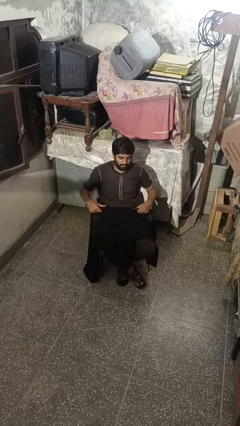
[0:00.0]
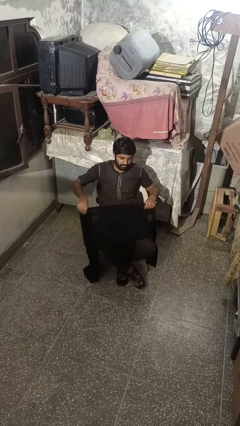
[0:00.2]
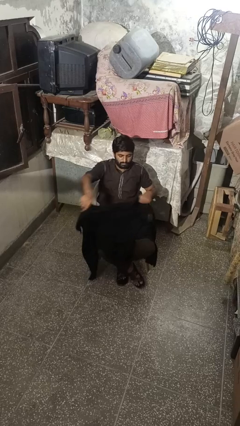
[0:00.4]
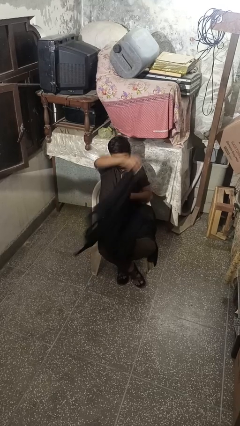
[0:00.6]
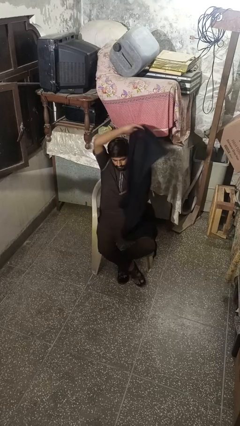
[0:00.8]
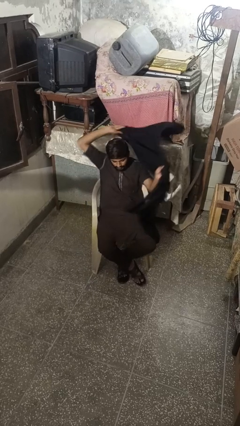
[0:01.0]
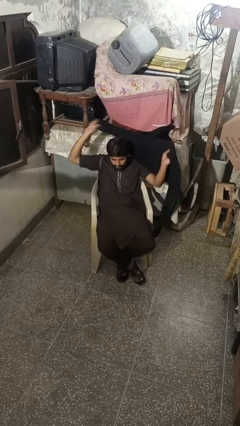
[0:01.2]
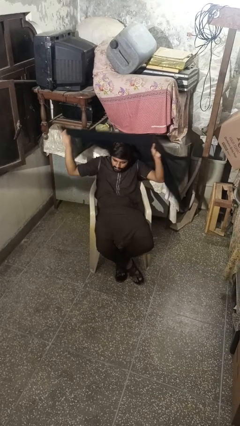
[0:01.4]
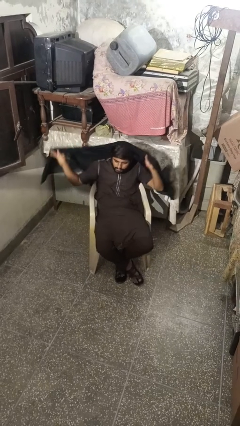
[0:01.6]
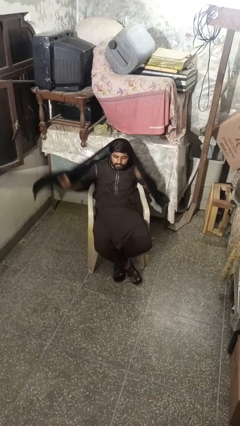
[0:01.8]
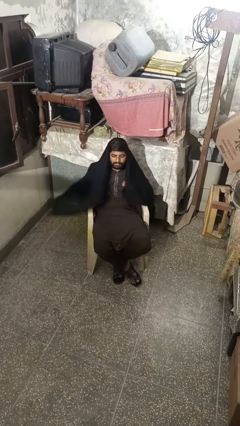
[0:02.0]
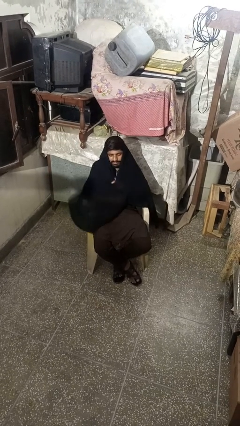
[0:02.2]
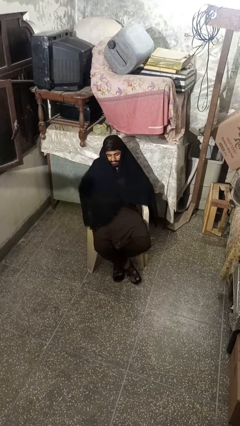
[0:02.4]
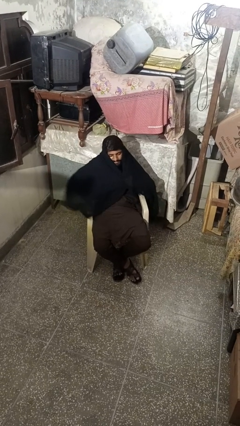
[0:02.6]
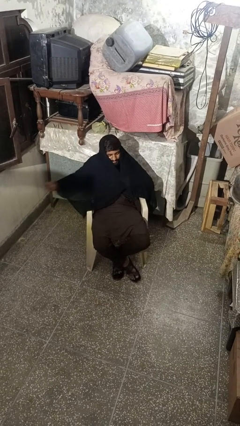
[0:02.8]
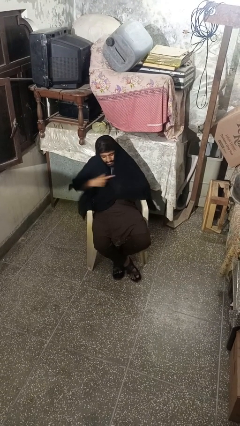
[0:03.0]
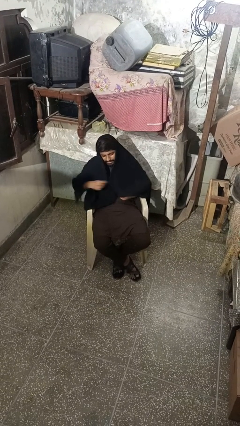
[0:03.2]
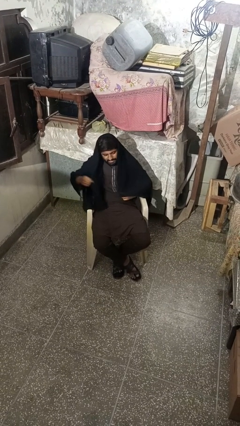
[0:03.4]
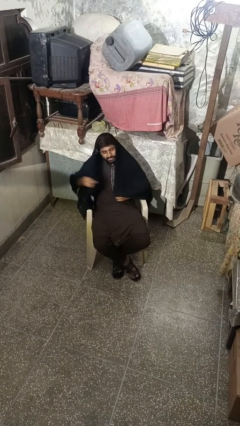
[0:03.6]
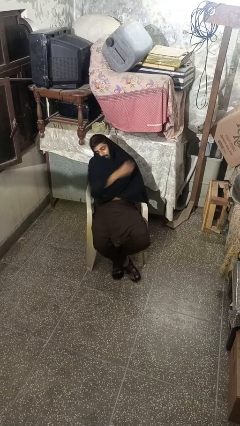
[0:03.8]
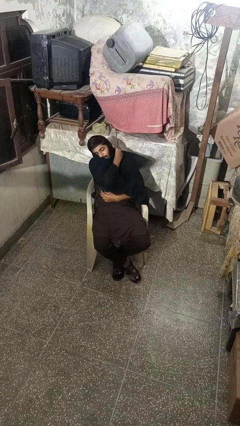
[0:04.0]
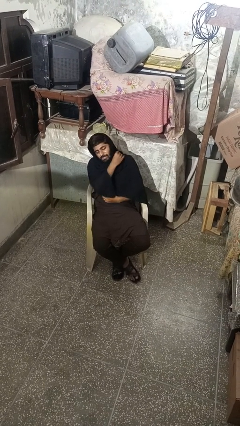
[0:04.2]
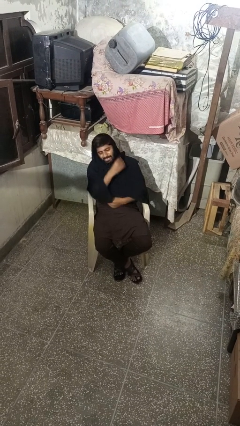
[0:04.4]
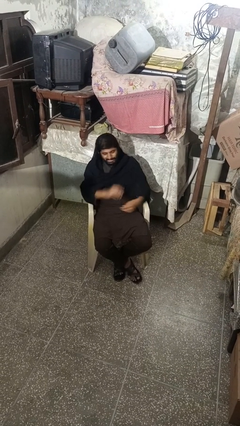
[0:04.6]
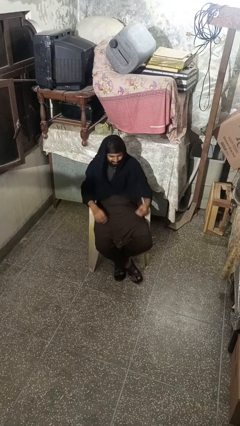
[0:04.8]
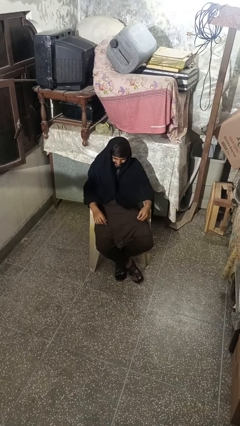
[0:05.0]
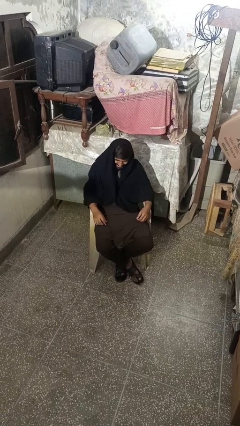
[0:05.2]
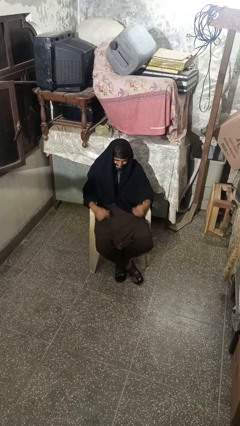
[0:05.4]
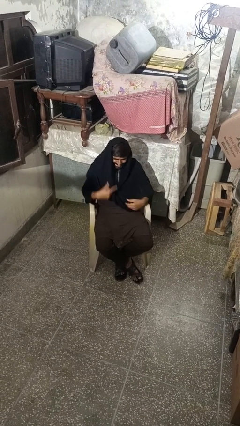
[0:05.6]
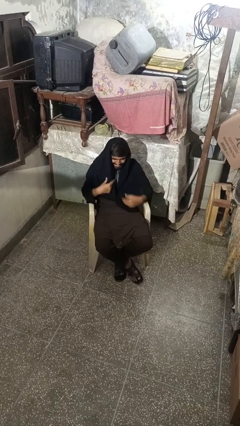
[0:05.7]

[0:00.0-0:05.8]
person puts on scarf

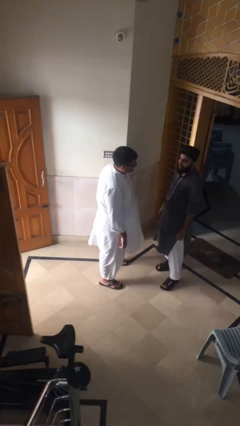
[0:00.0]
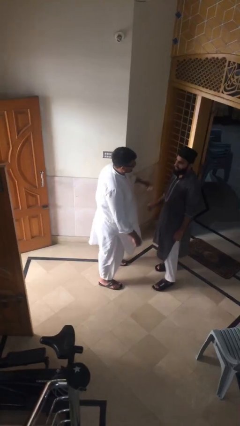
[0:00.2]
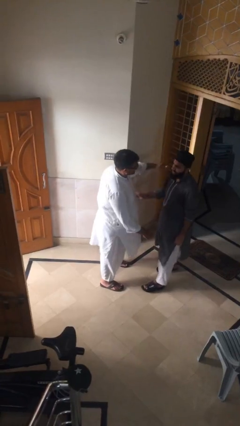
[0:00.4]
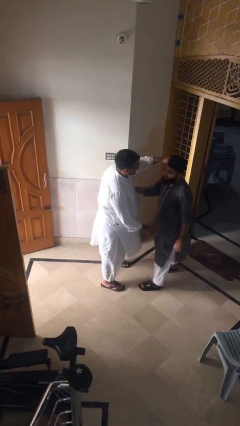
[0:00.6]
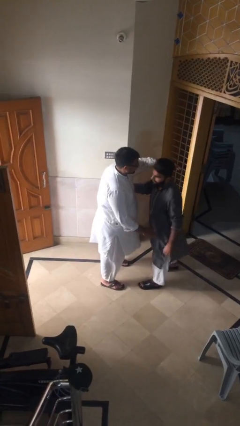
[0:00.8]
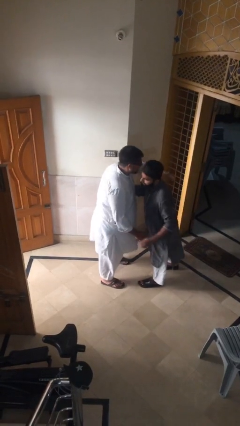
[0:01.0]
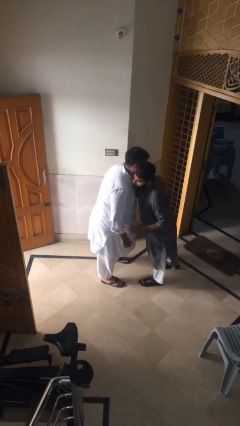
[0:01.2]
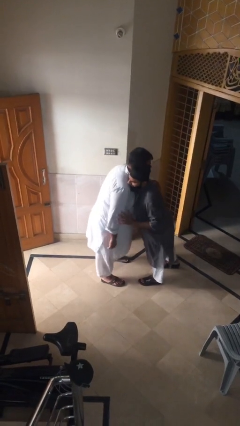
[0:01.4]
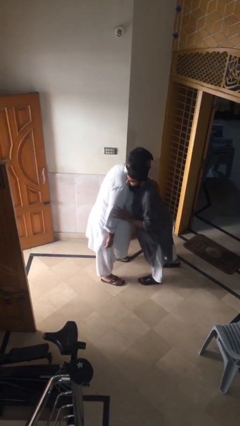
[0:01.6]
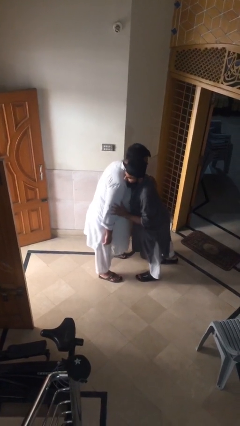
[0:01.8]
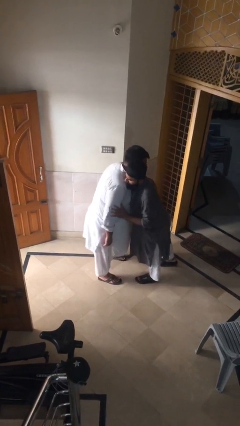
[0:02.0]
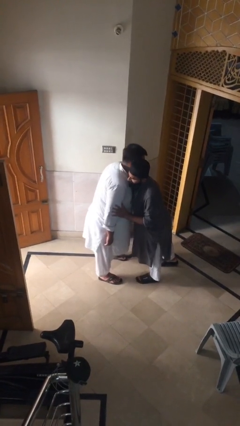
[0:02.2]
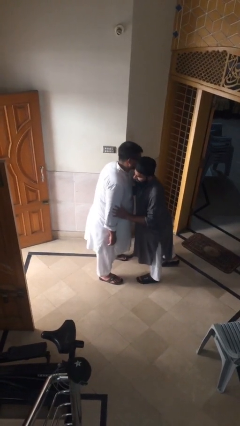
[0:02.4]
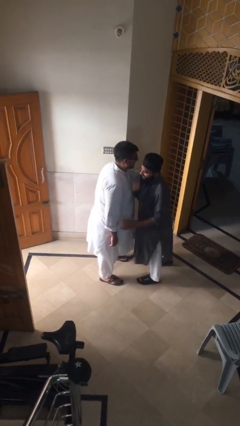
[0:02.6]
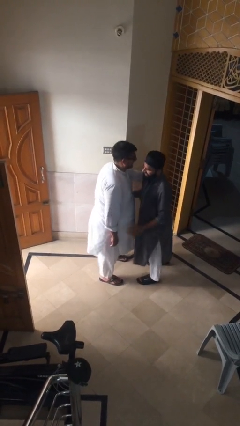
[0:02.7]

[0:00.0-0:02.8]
person embraces person

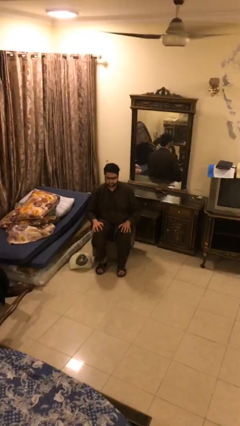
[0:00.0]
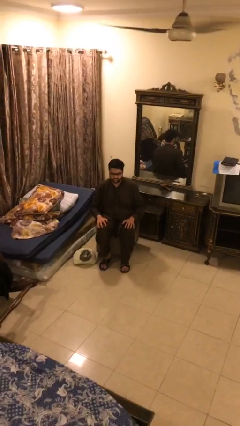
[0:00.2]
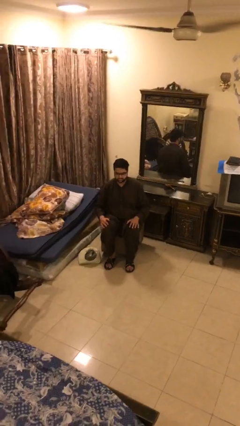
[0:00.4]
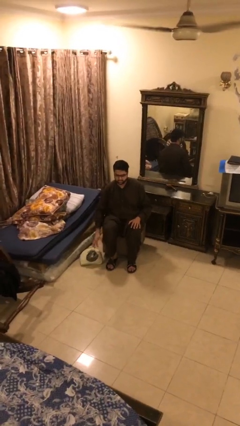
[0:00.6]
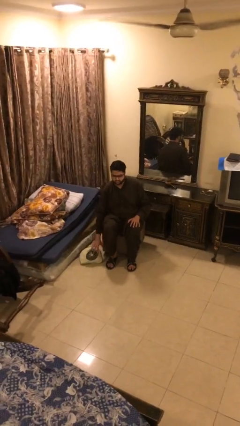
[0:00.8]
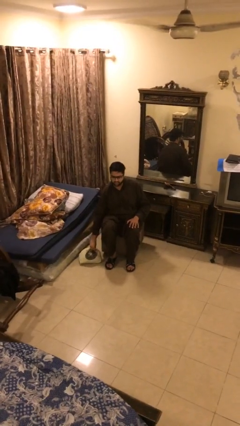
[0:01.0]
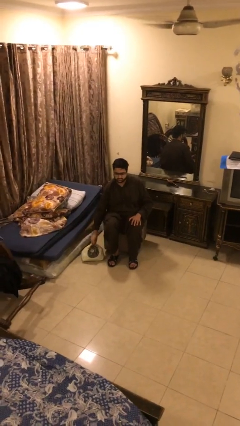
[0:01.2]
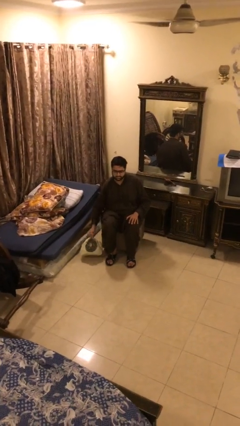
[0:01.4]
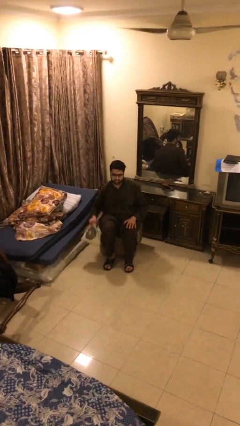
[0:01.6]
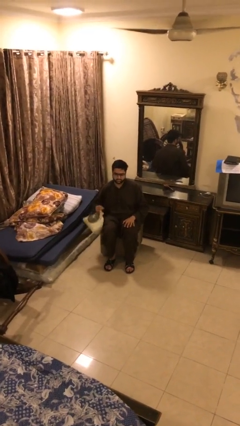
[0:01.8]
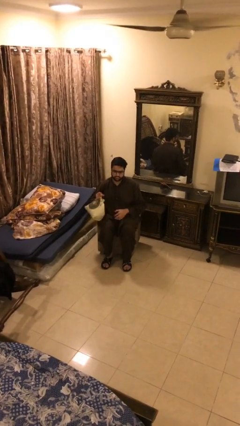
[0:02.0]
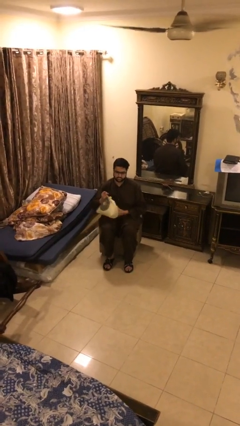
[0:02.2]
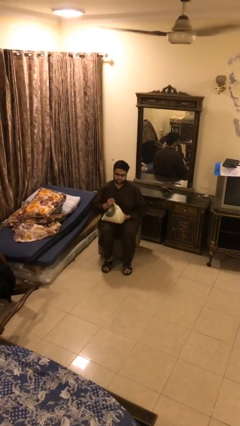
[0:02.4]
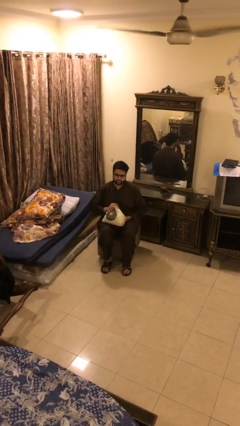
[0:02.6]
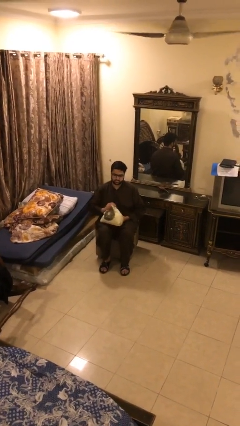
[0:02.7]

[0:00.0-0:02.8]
person picks up object from floor

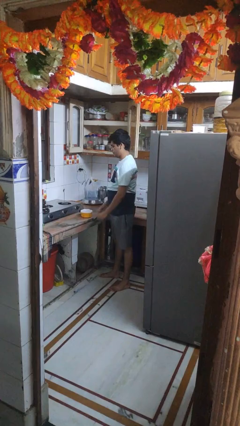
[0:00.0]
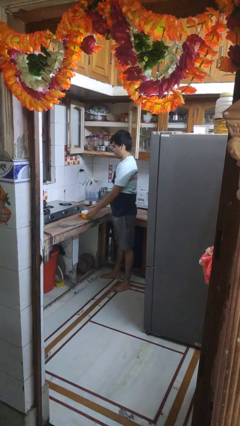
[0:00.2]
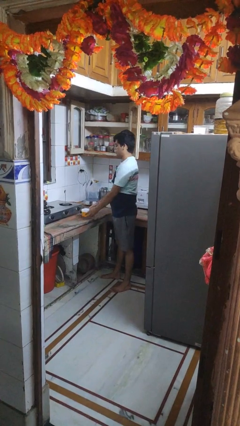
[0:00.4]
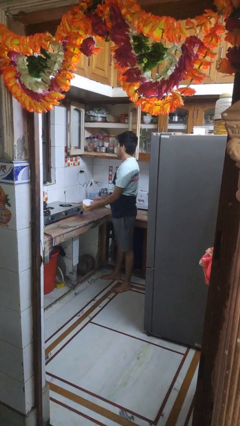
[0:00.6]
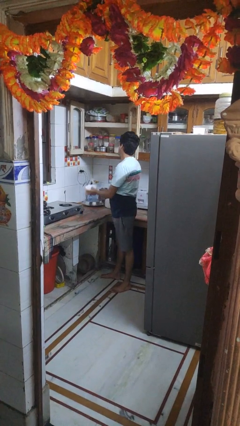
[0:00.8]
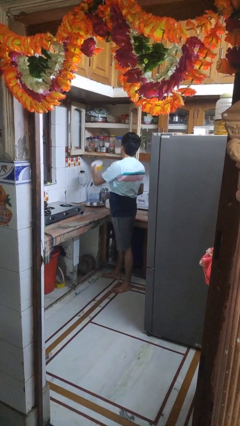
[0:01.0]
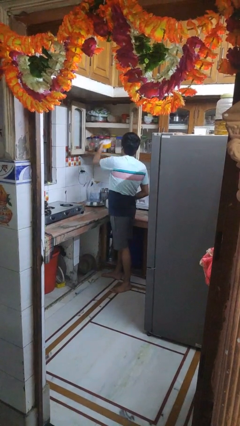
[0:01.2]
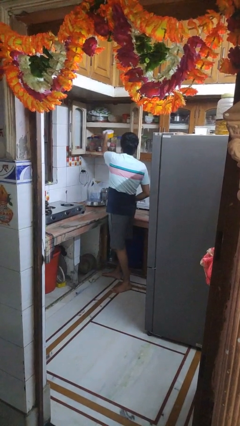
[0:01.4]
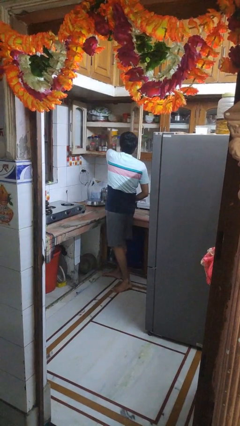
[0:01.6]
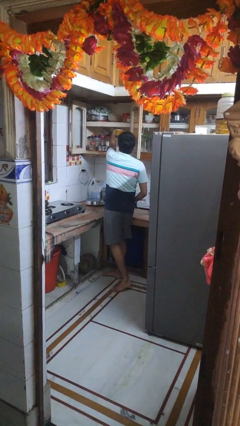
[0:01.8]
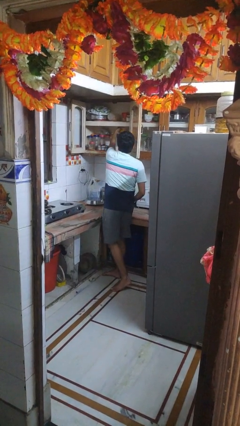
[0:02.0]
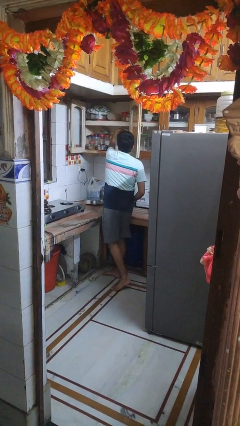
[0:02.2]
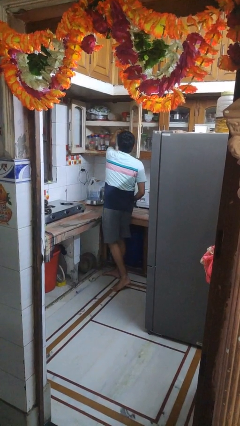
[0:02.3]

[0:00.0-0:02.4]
person puts object in cabinet

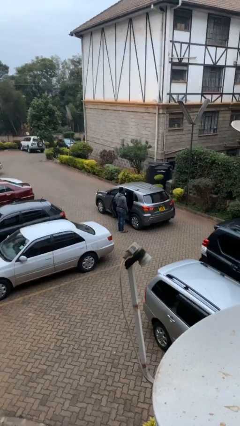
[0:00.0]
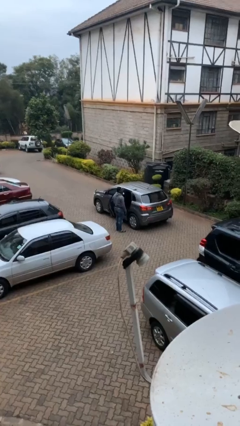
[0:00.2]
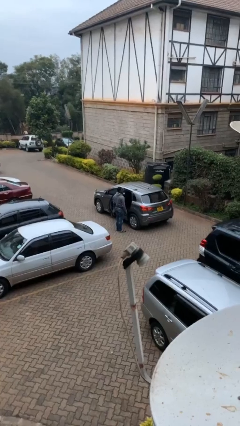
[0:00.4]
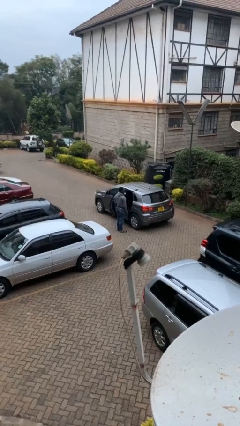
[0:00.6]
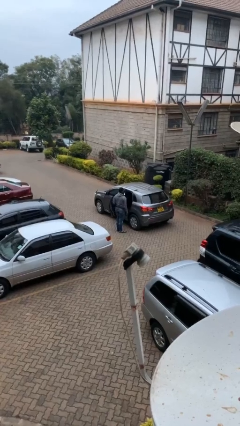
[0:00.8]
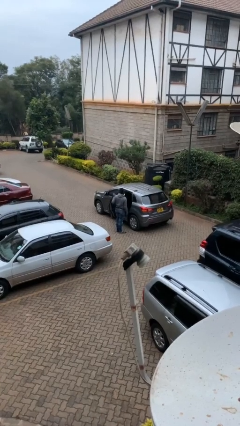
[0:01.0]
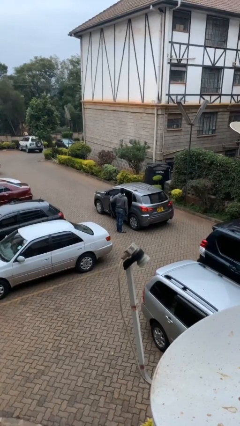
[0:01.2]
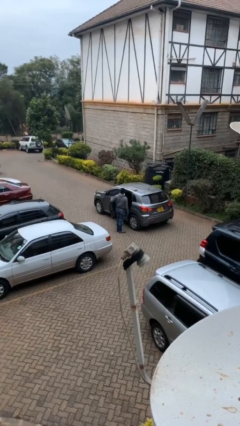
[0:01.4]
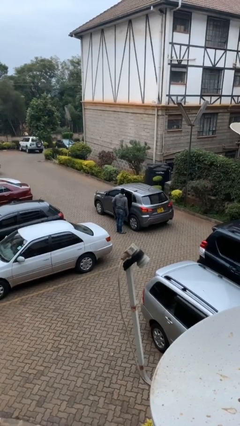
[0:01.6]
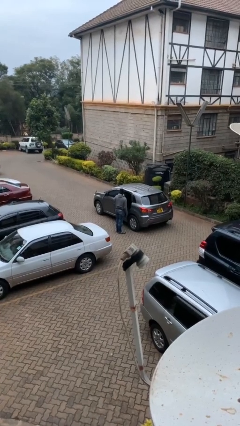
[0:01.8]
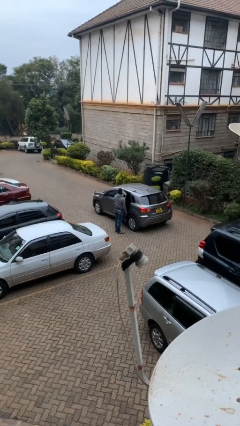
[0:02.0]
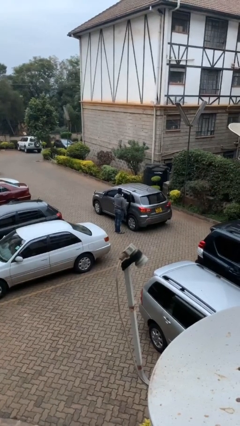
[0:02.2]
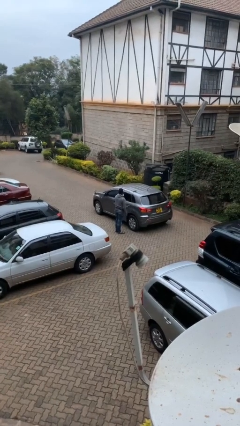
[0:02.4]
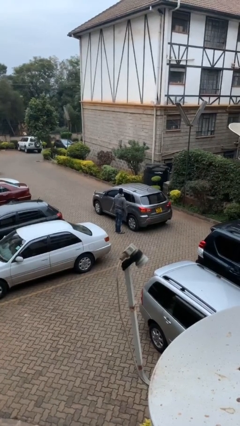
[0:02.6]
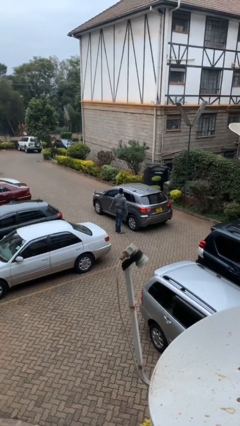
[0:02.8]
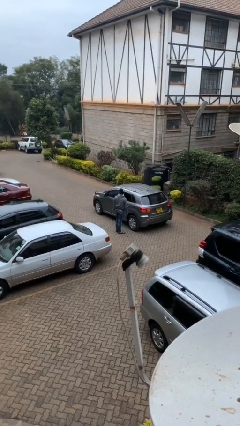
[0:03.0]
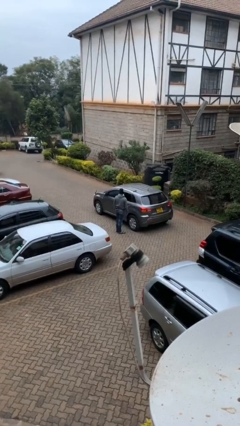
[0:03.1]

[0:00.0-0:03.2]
person closes car door
